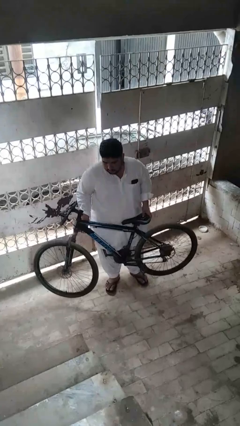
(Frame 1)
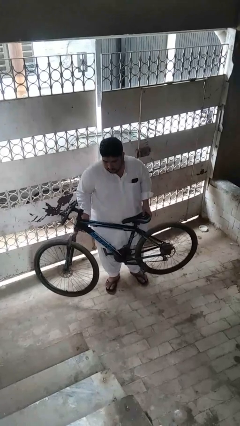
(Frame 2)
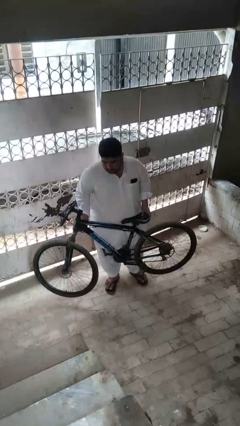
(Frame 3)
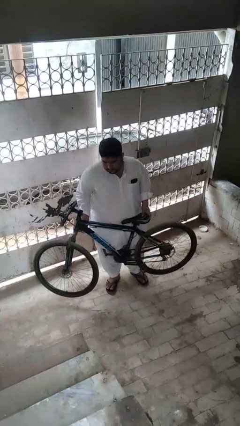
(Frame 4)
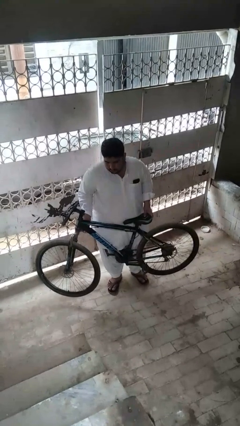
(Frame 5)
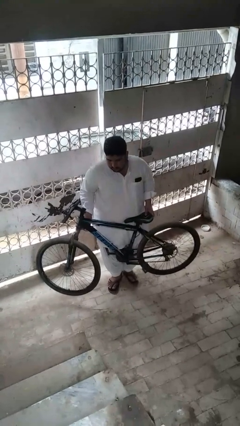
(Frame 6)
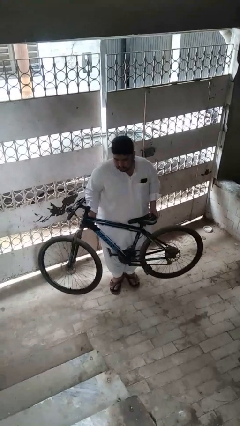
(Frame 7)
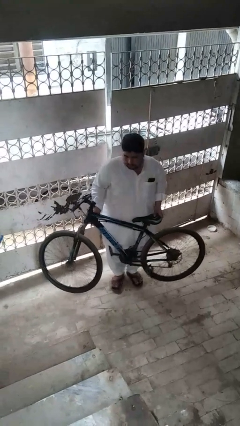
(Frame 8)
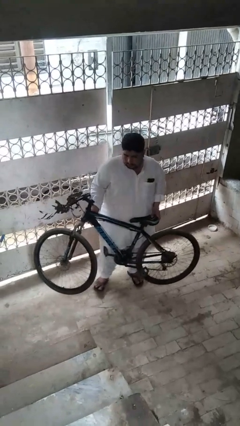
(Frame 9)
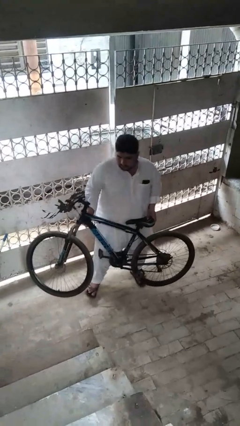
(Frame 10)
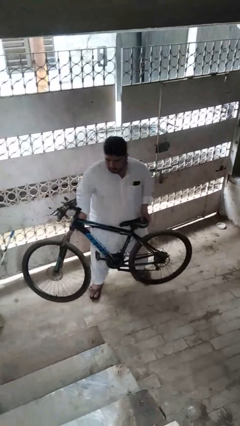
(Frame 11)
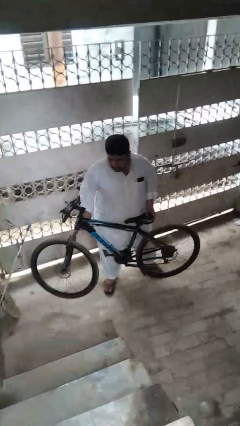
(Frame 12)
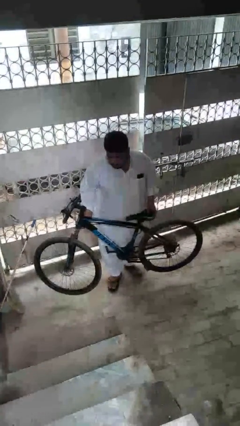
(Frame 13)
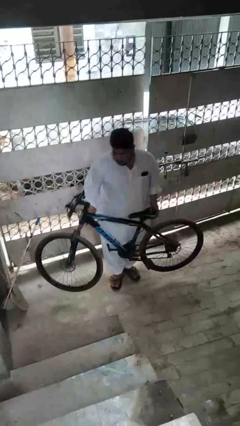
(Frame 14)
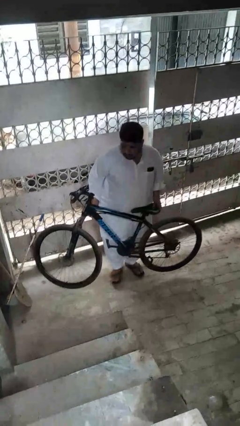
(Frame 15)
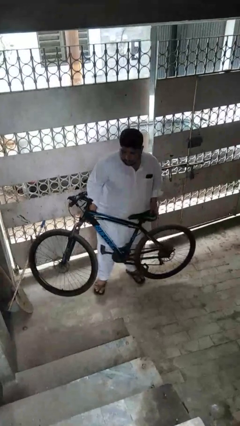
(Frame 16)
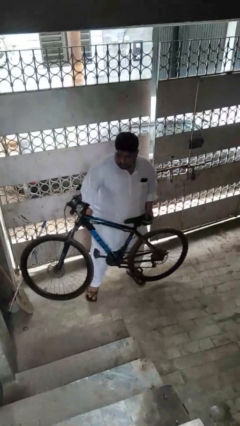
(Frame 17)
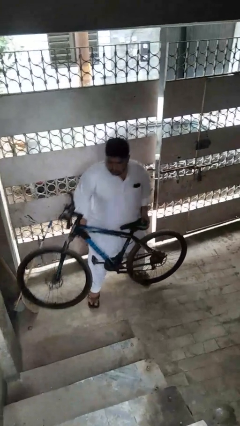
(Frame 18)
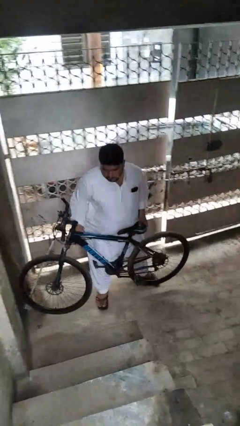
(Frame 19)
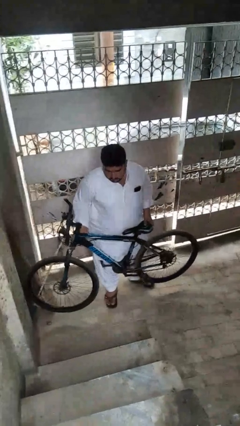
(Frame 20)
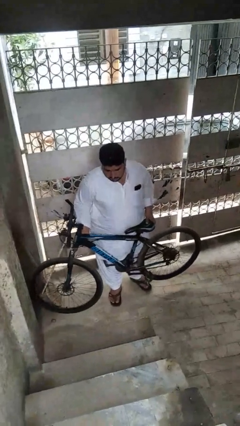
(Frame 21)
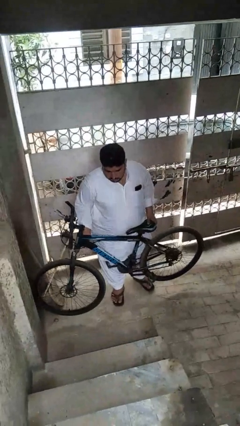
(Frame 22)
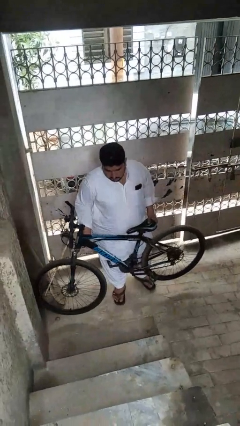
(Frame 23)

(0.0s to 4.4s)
person carries bicycle

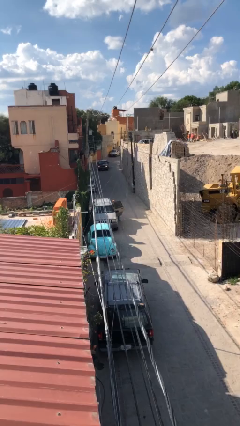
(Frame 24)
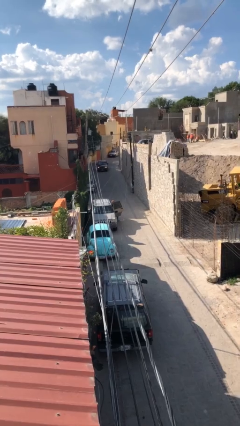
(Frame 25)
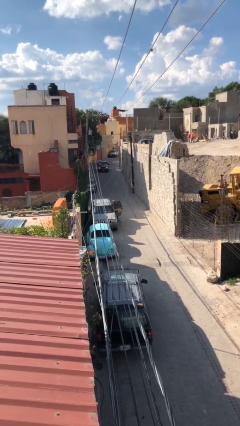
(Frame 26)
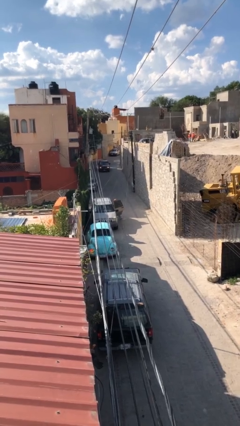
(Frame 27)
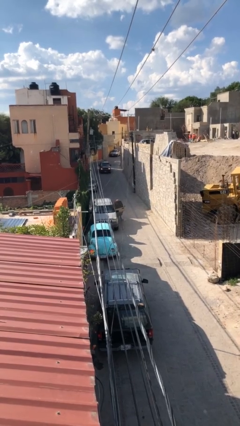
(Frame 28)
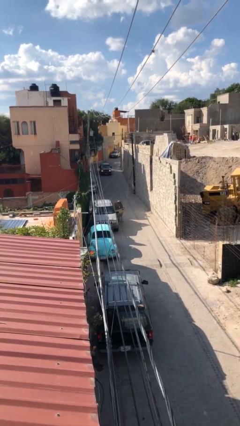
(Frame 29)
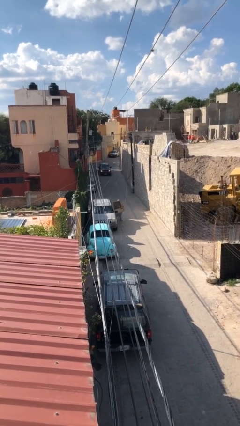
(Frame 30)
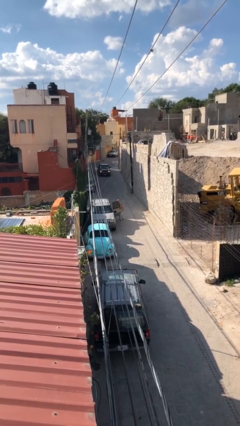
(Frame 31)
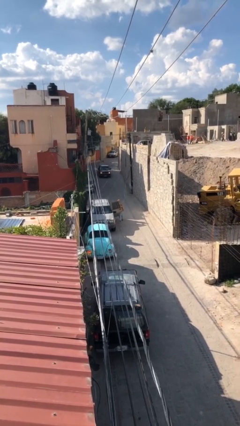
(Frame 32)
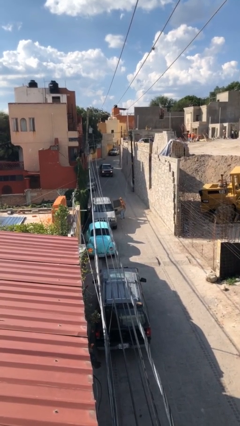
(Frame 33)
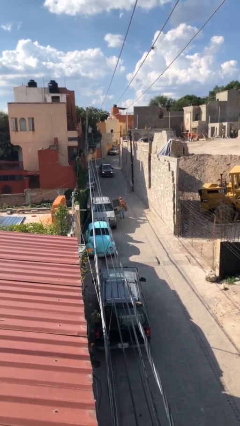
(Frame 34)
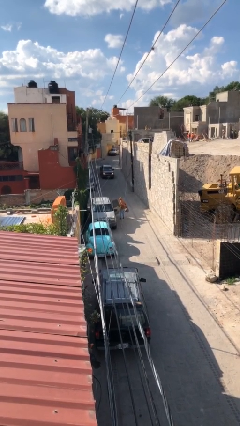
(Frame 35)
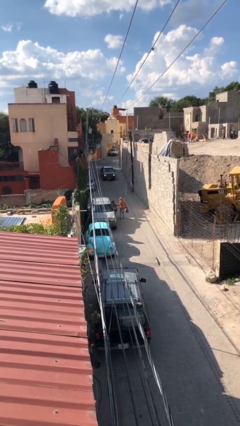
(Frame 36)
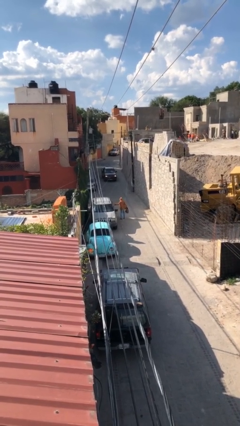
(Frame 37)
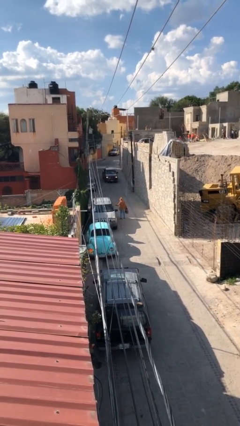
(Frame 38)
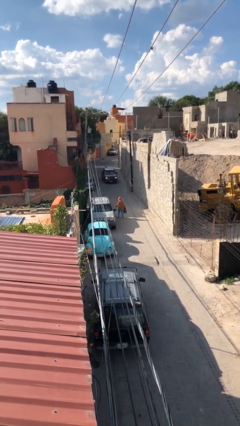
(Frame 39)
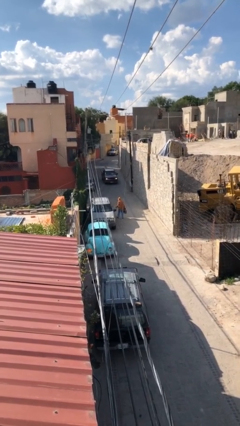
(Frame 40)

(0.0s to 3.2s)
person unloads car

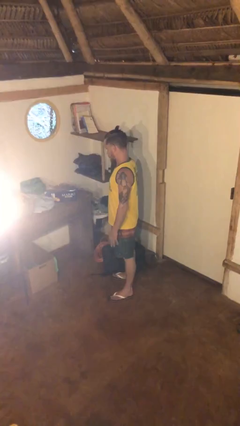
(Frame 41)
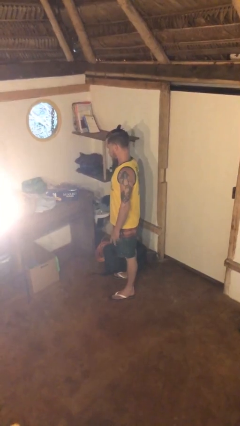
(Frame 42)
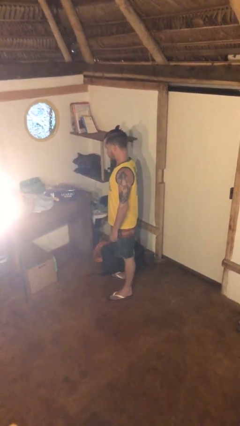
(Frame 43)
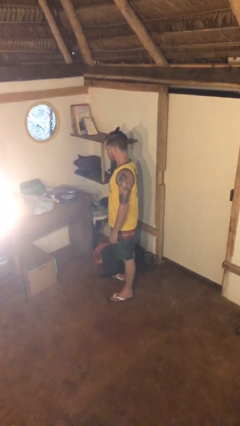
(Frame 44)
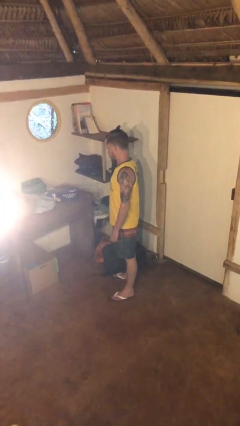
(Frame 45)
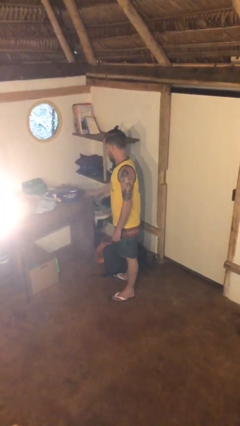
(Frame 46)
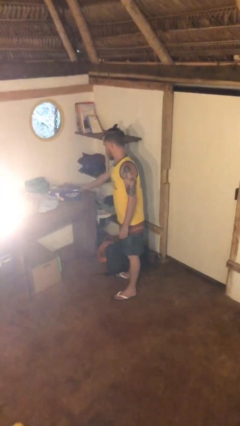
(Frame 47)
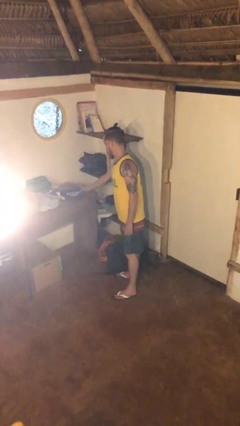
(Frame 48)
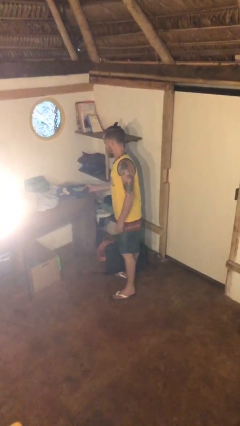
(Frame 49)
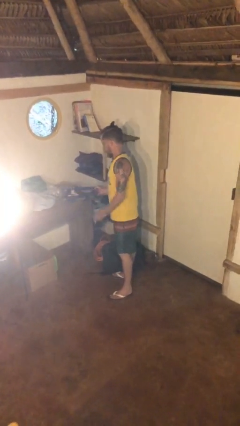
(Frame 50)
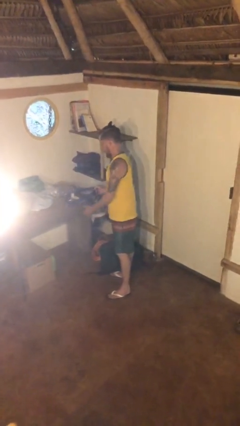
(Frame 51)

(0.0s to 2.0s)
person picks up object from table

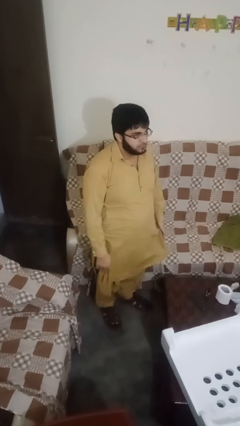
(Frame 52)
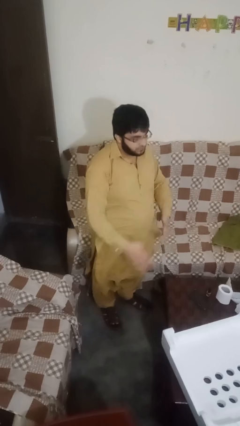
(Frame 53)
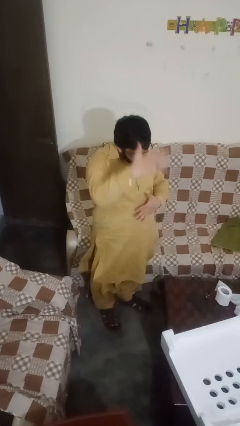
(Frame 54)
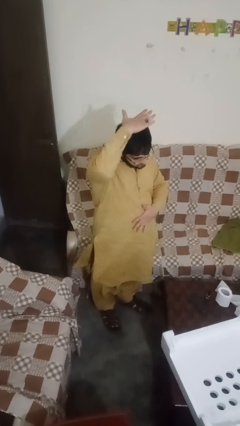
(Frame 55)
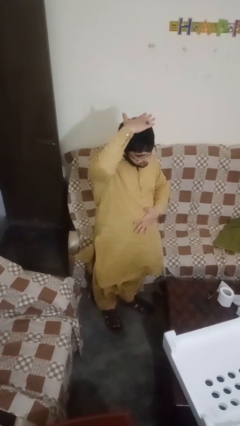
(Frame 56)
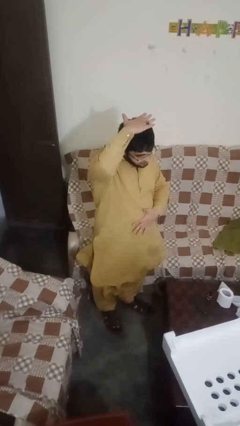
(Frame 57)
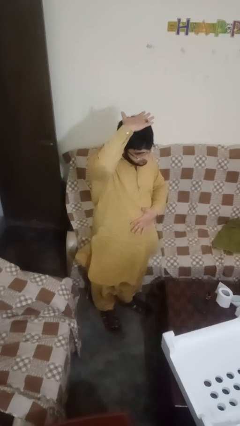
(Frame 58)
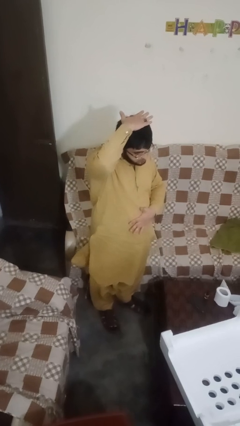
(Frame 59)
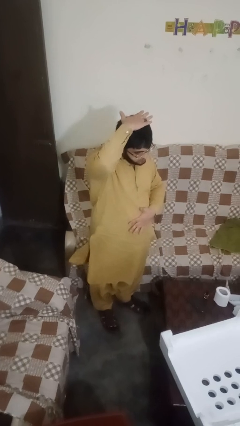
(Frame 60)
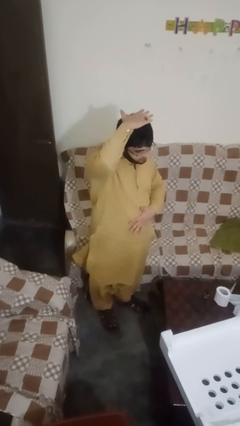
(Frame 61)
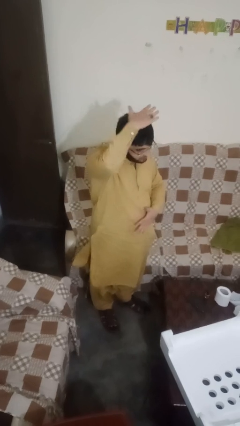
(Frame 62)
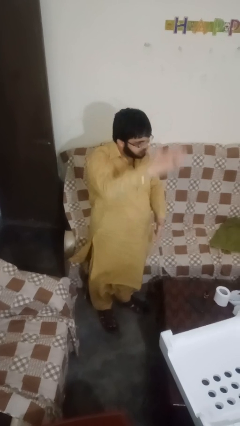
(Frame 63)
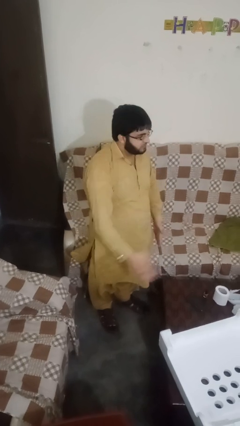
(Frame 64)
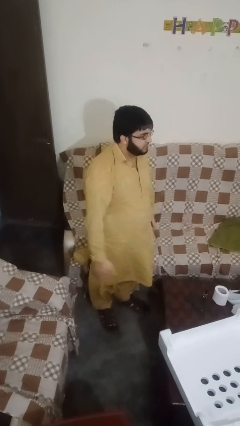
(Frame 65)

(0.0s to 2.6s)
person pats head

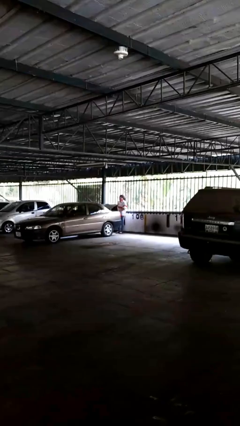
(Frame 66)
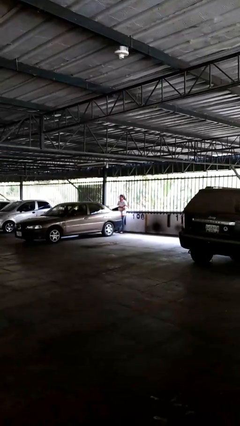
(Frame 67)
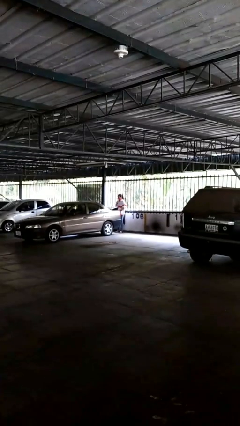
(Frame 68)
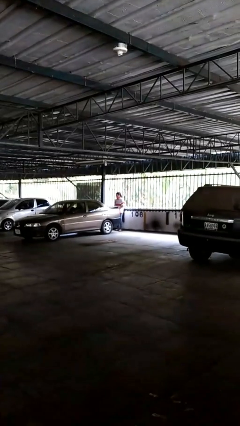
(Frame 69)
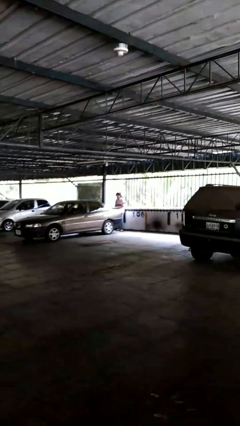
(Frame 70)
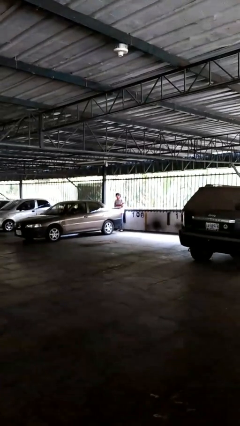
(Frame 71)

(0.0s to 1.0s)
person closes car trunk

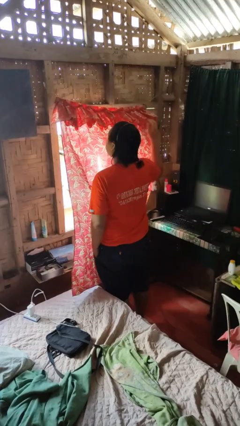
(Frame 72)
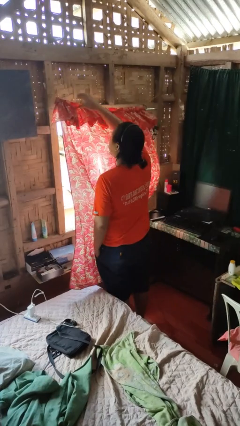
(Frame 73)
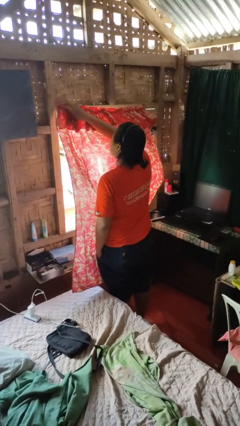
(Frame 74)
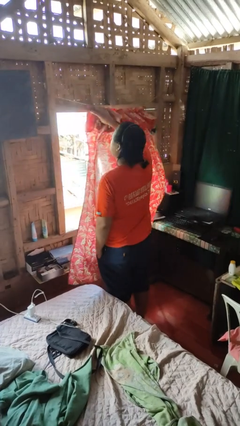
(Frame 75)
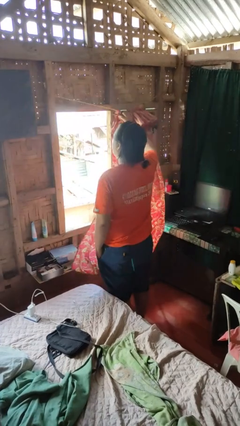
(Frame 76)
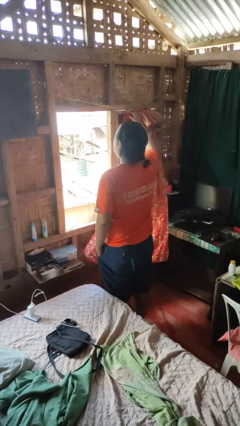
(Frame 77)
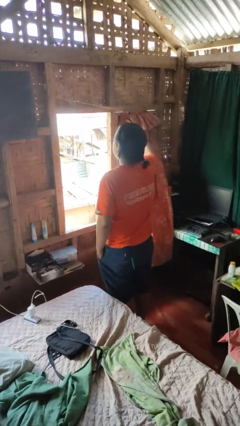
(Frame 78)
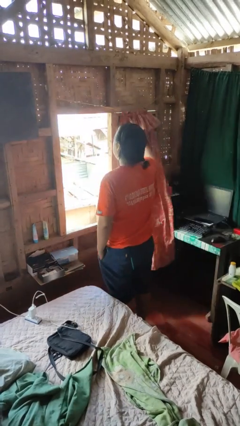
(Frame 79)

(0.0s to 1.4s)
person opens curtains

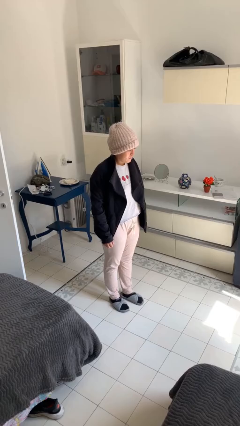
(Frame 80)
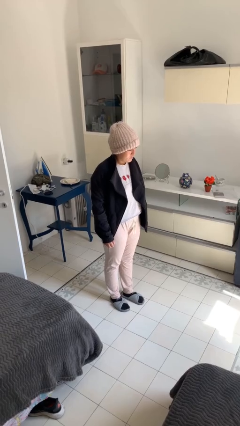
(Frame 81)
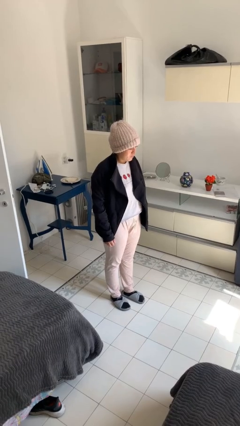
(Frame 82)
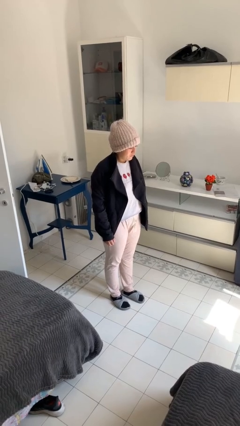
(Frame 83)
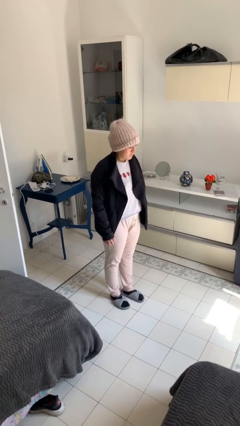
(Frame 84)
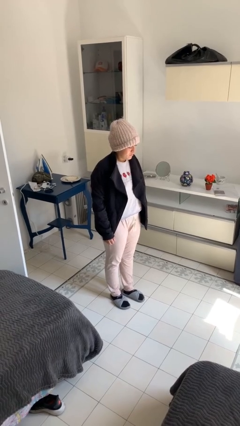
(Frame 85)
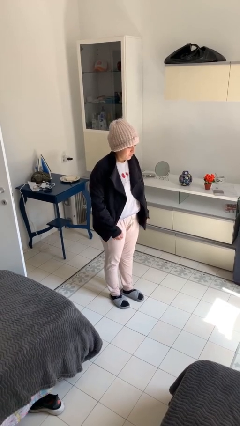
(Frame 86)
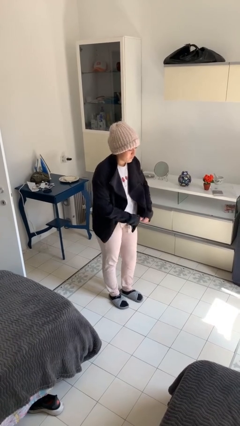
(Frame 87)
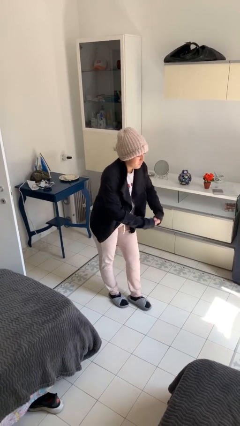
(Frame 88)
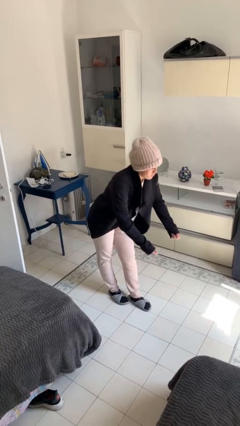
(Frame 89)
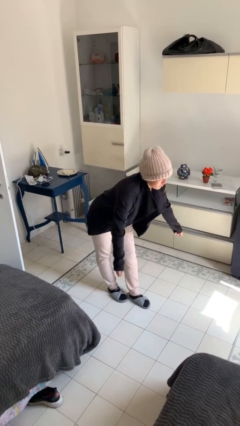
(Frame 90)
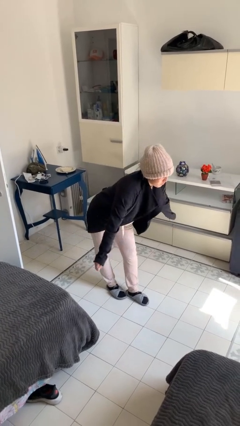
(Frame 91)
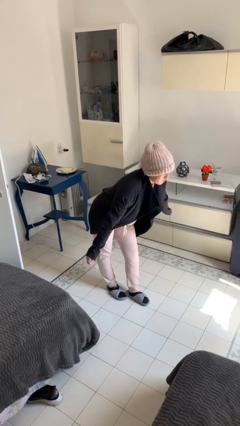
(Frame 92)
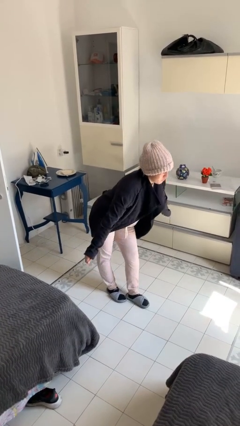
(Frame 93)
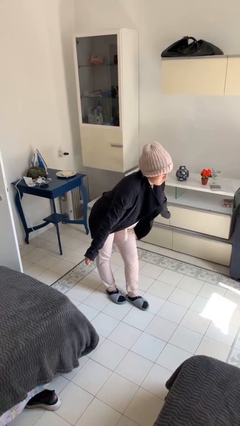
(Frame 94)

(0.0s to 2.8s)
person bows
